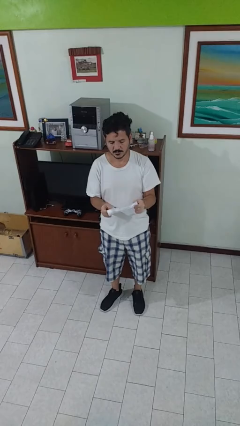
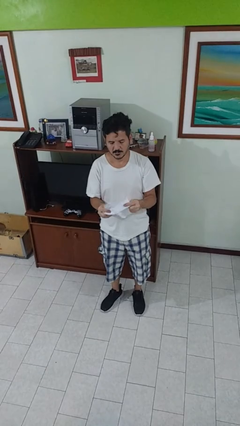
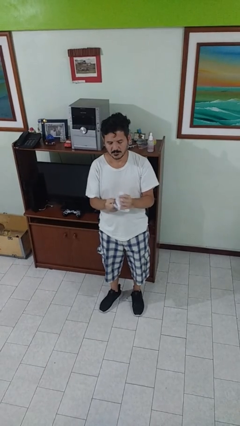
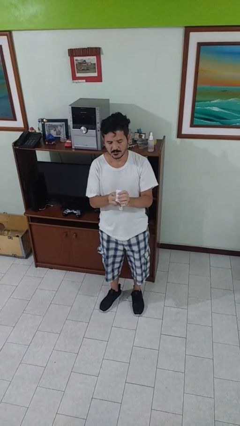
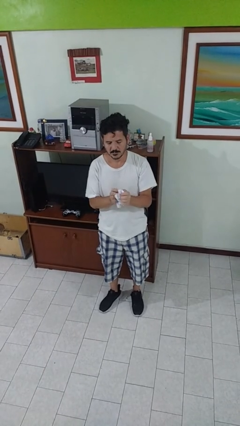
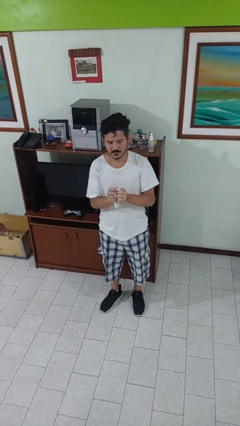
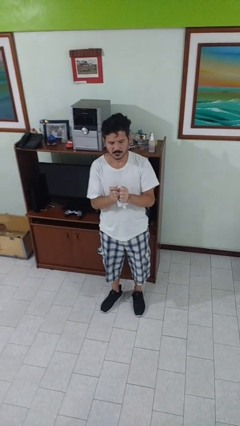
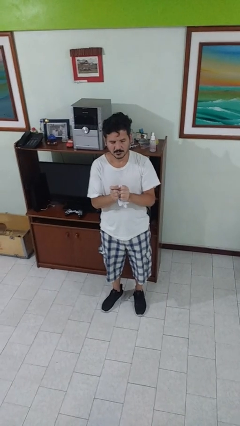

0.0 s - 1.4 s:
person crumples paper

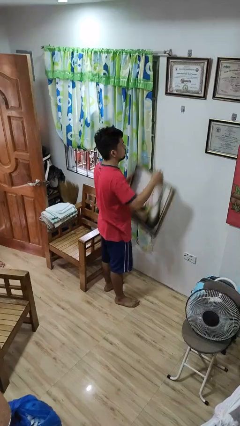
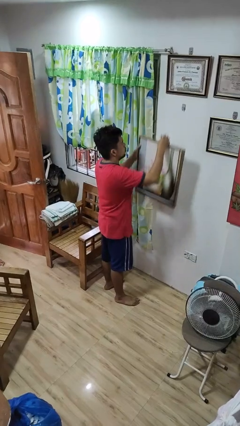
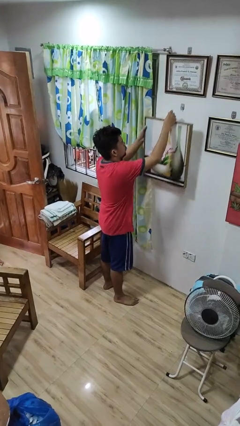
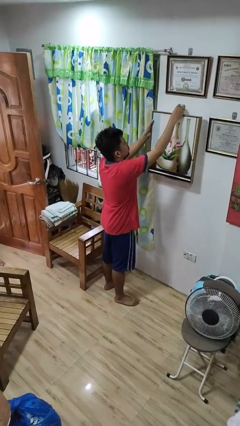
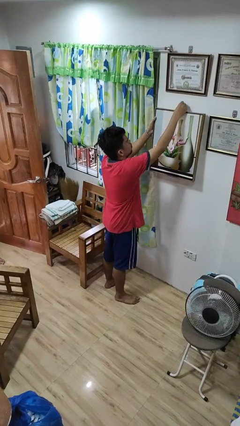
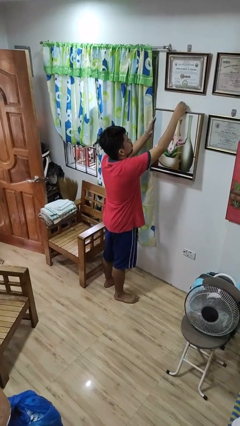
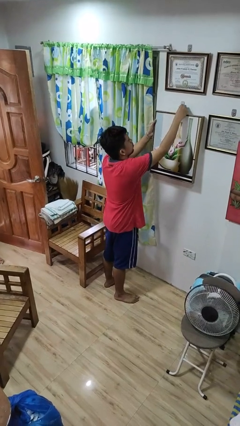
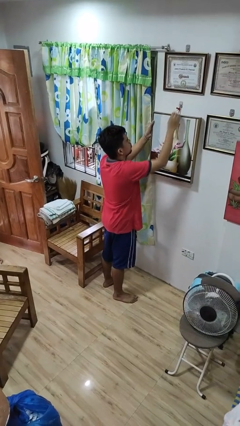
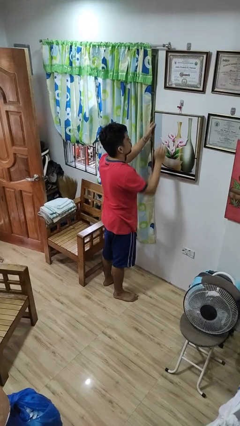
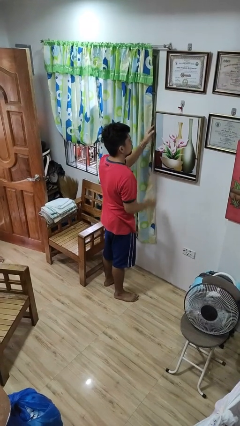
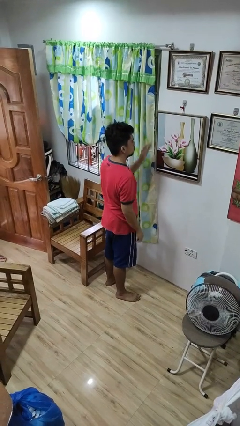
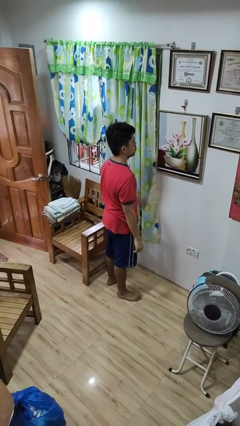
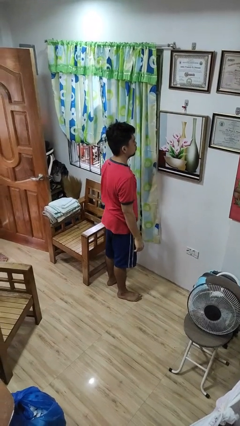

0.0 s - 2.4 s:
person puts up picture frame

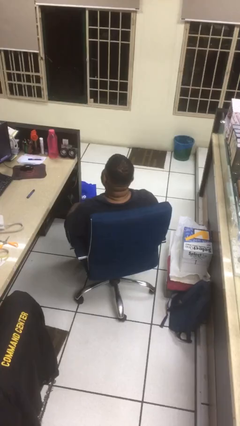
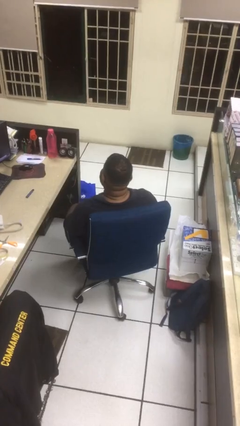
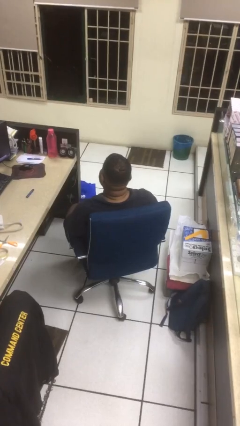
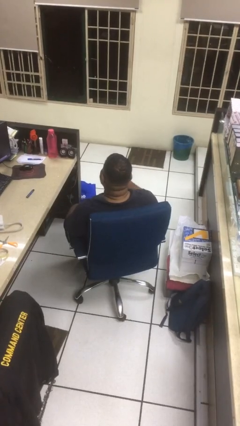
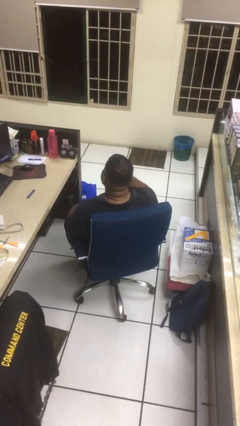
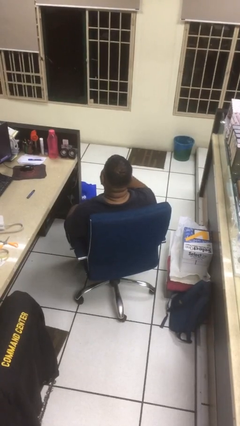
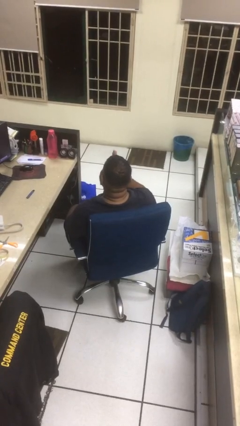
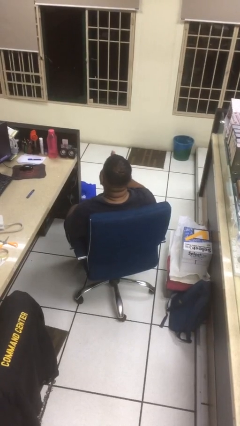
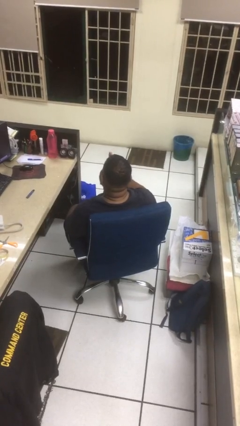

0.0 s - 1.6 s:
person gestures blow kiss

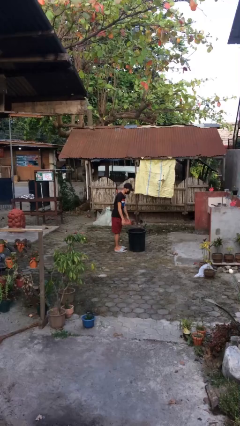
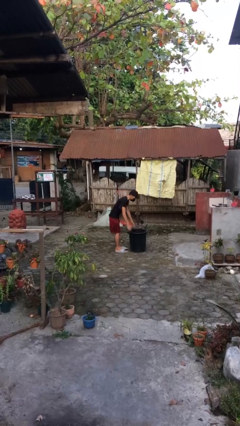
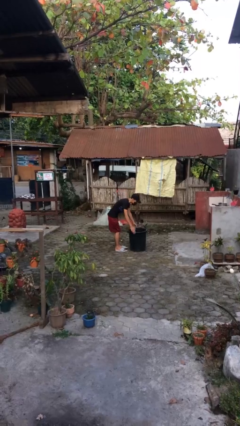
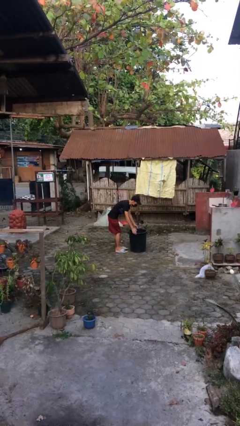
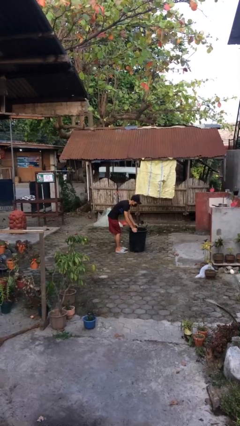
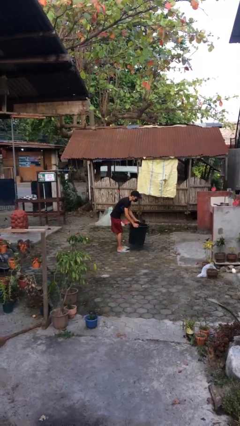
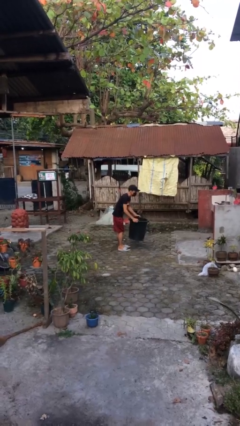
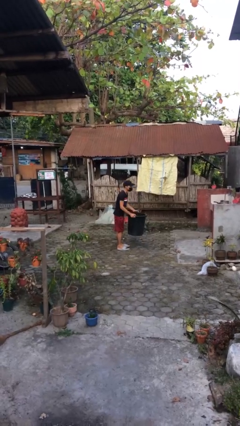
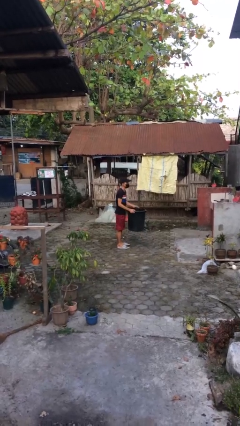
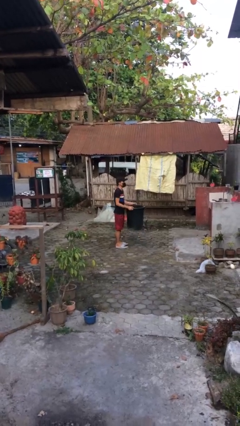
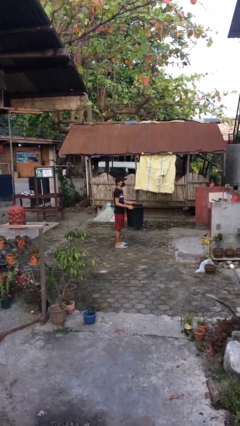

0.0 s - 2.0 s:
person picks up object from floor

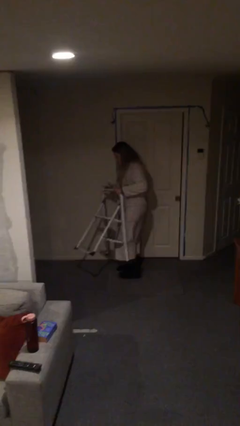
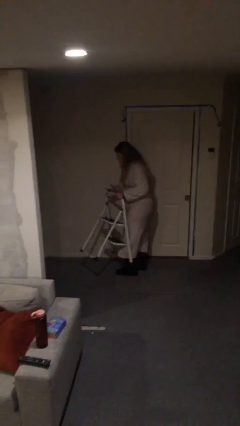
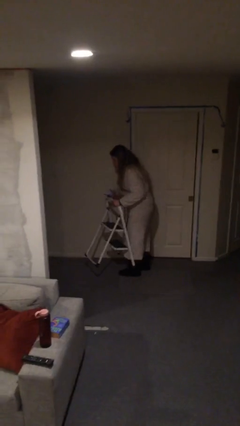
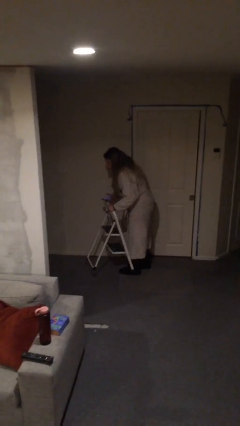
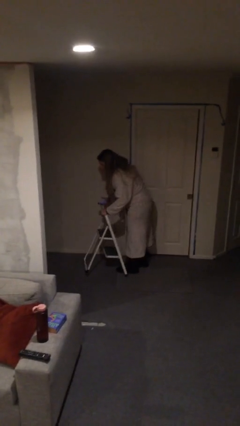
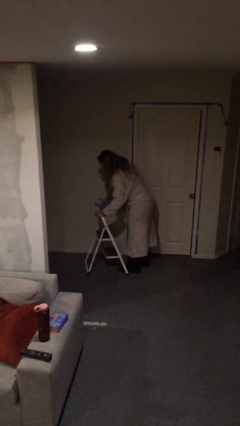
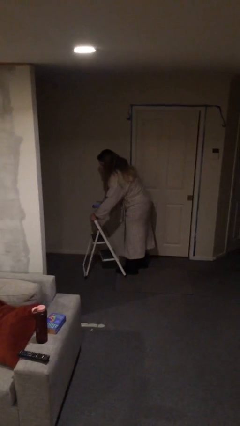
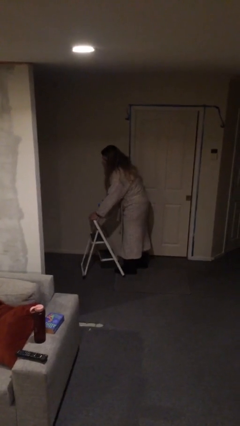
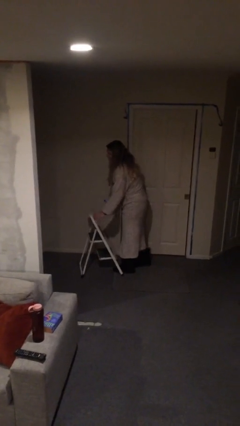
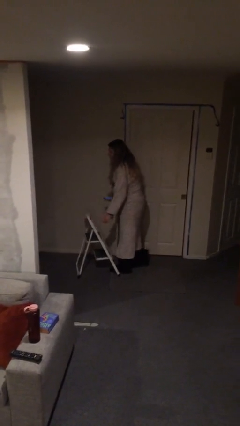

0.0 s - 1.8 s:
person puts down object on floor

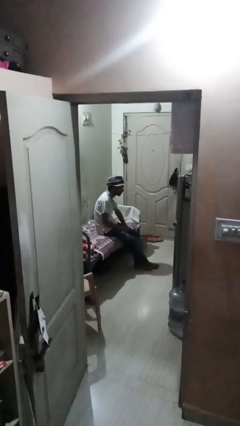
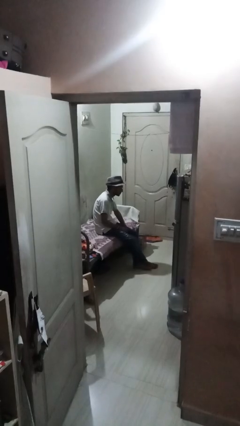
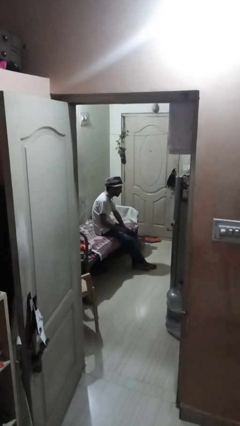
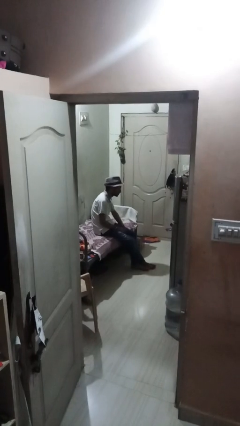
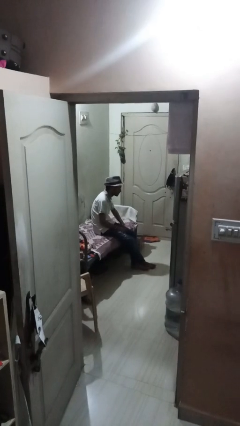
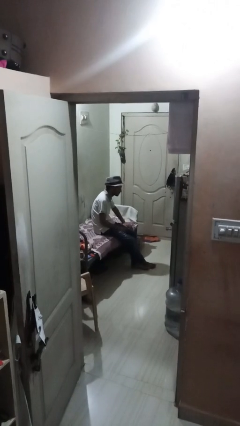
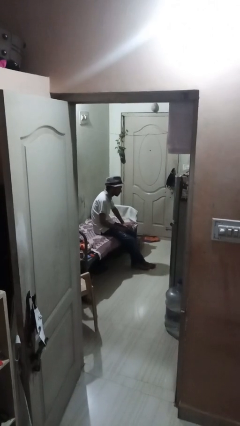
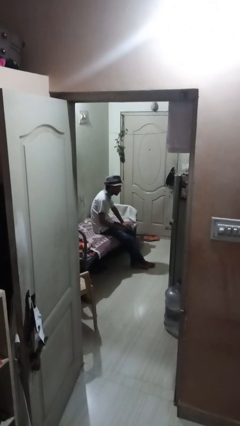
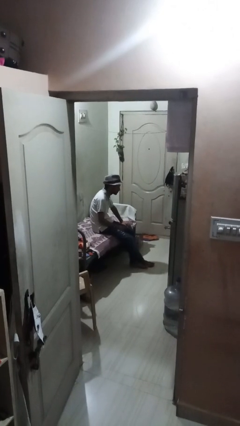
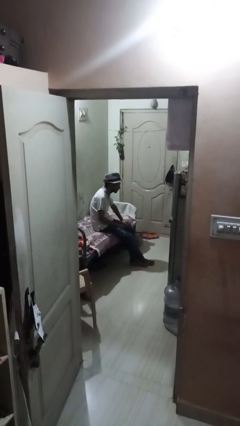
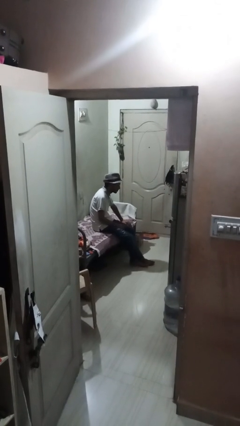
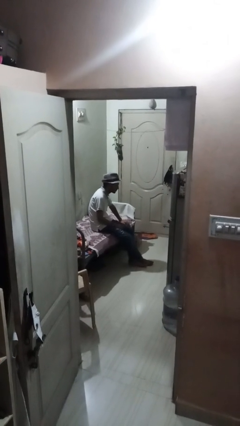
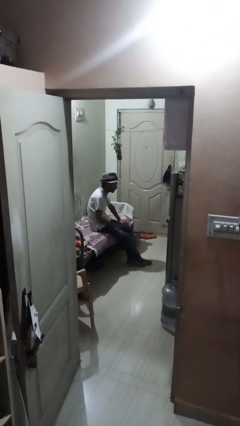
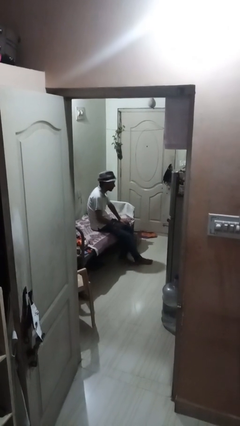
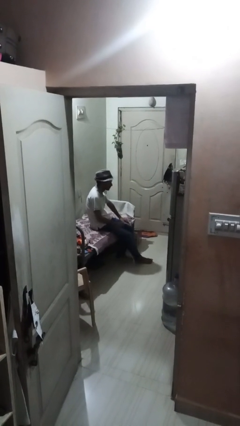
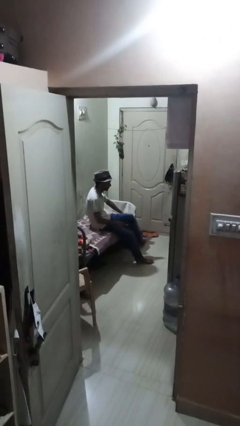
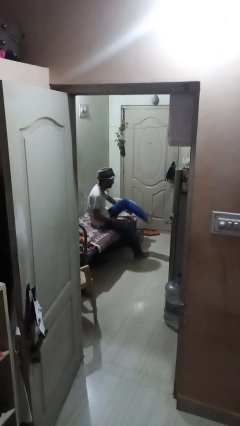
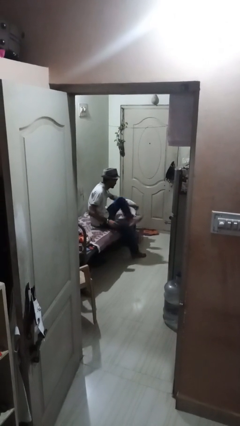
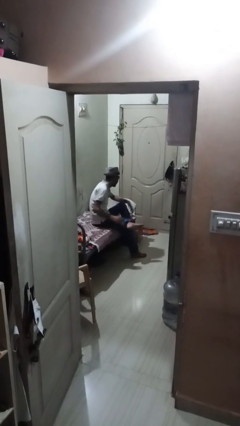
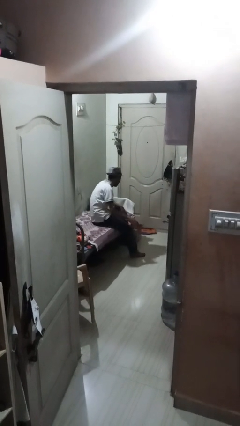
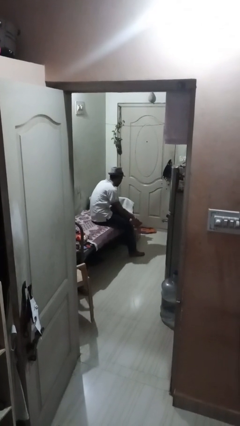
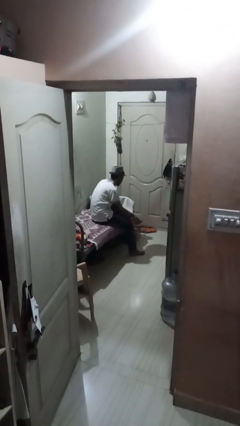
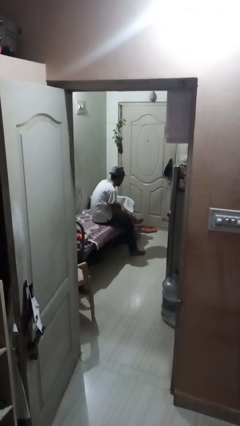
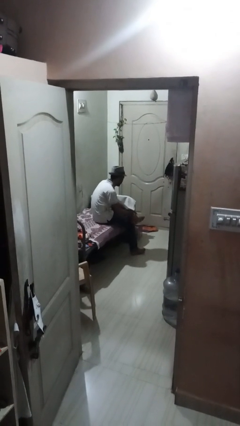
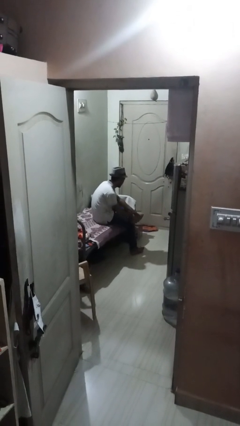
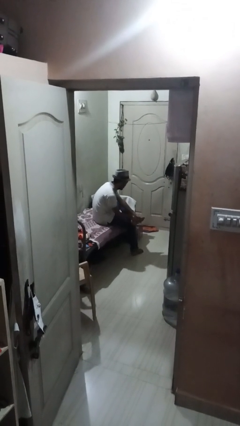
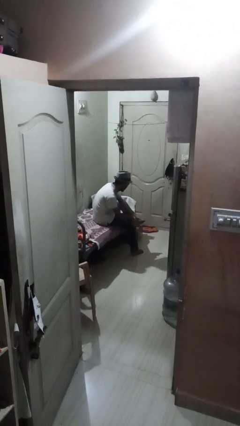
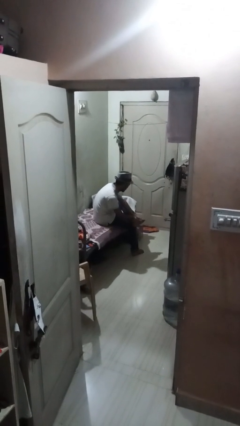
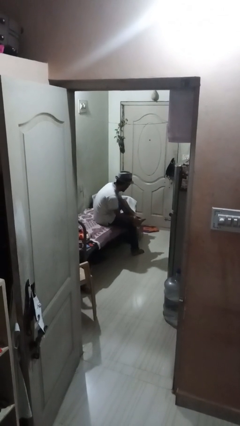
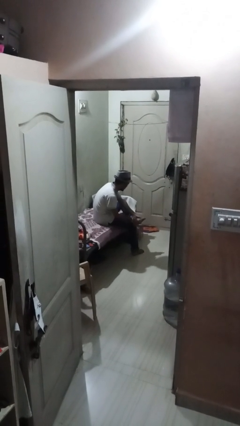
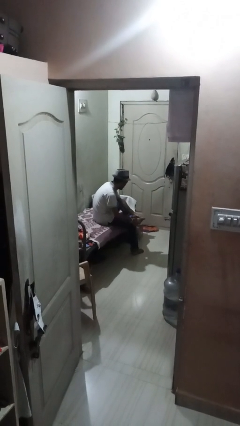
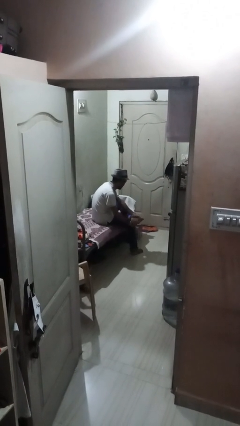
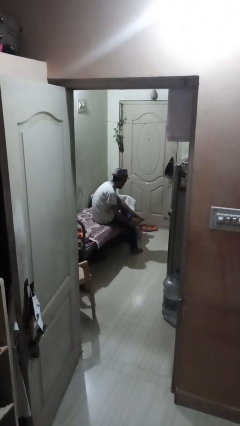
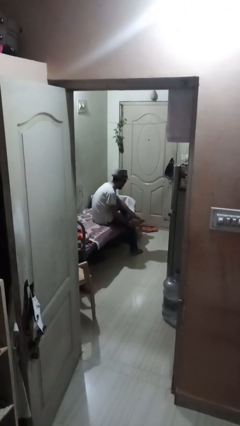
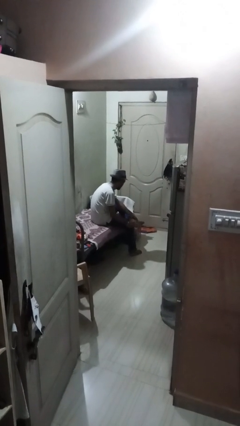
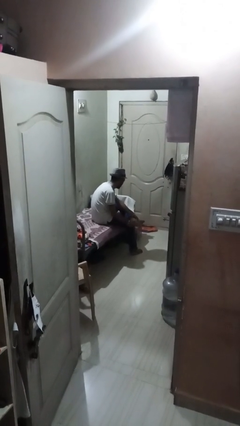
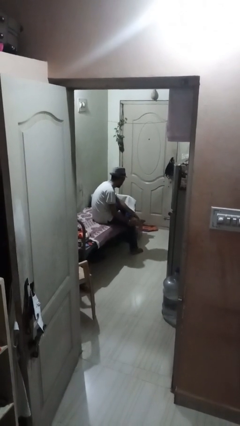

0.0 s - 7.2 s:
person rubs foot

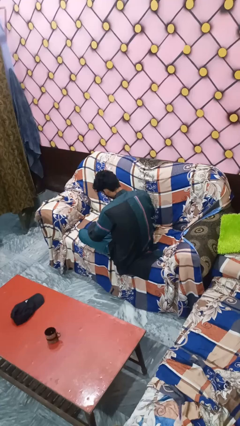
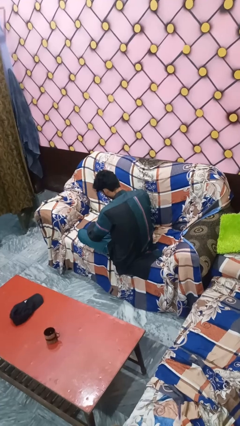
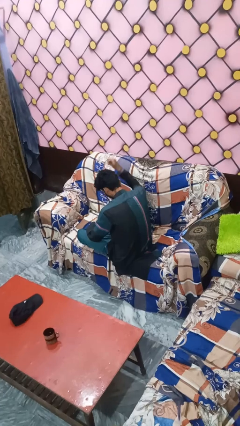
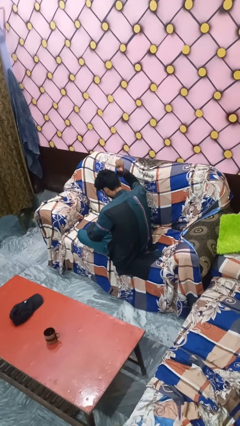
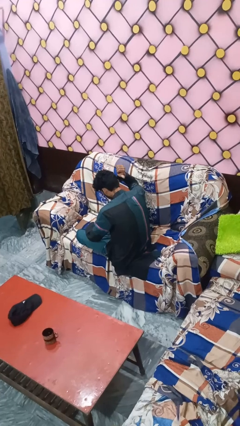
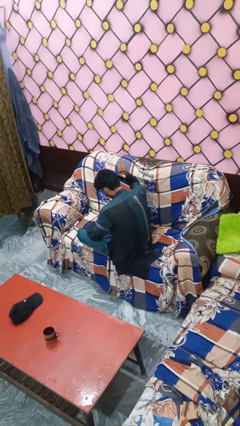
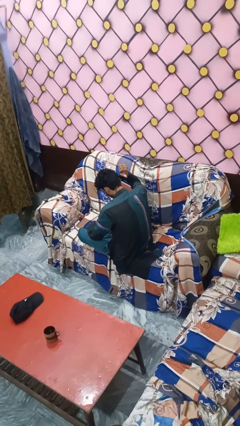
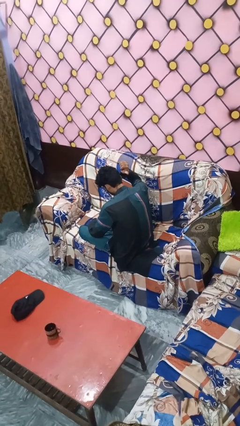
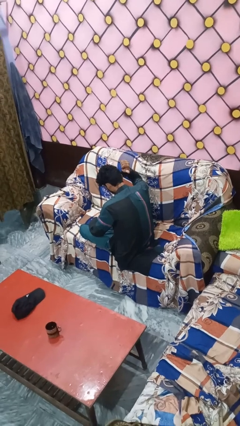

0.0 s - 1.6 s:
person gestures behind me
